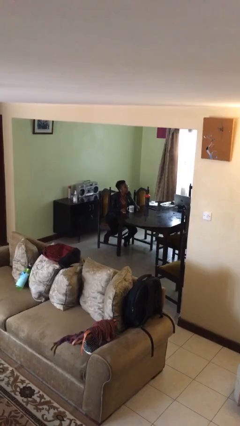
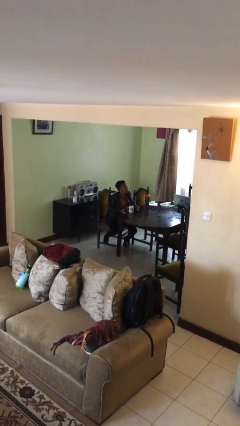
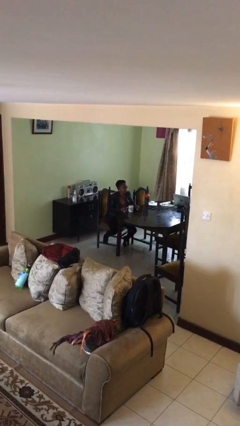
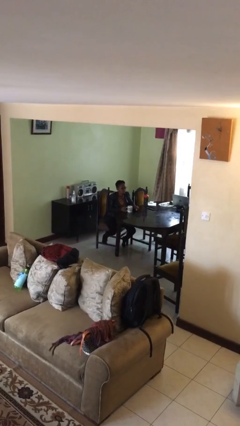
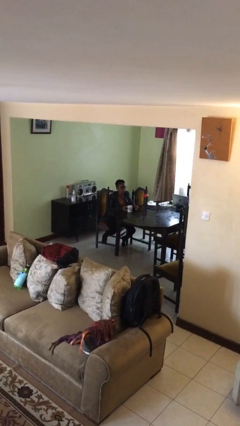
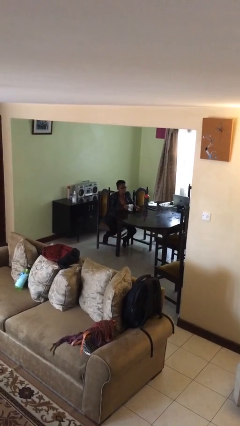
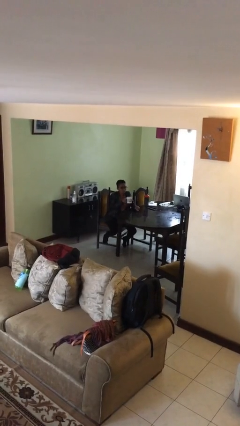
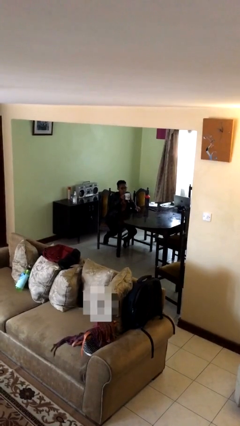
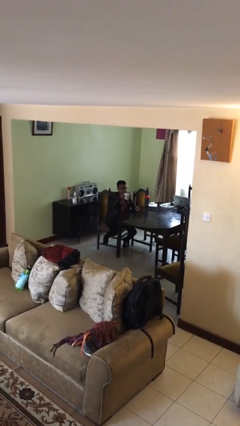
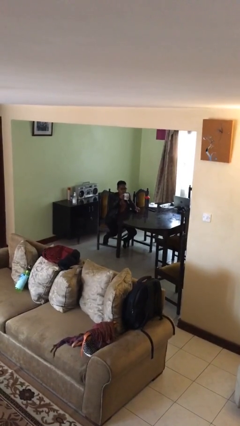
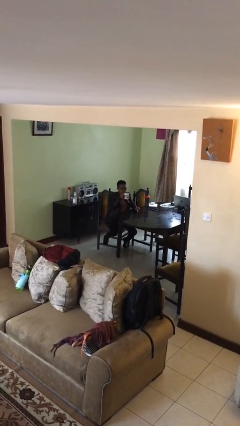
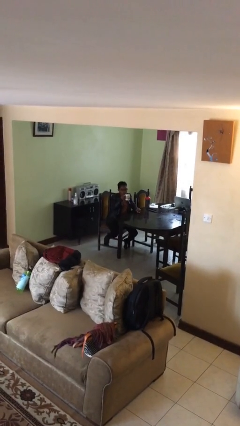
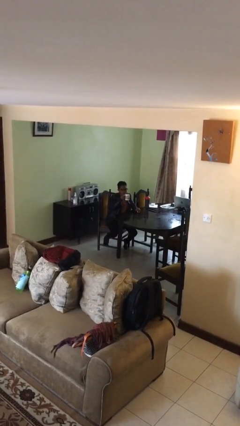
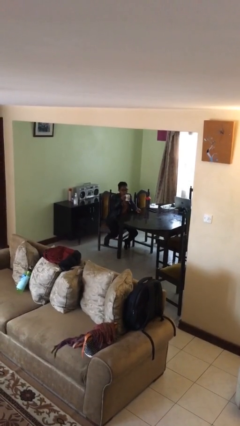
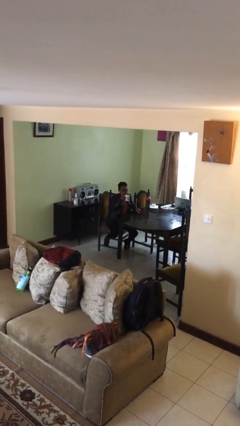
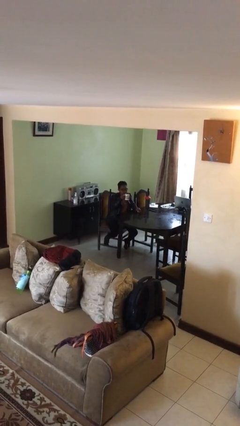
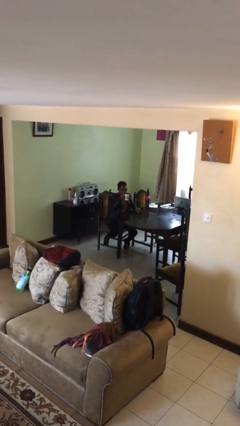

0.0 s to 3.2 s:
person picks up object from table

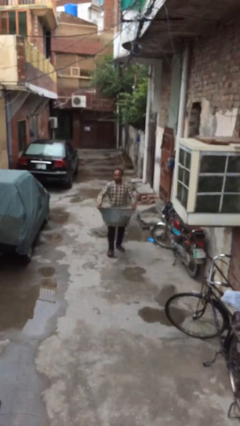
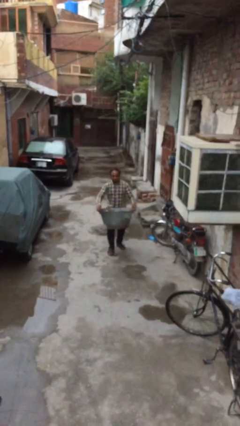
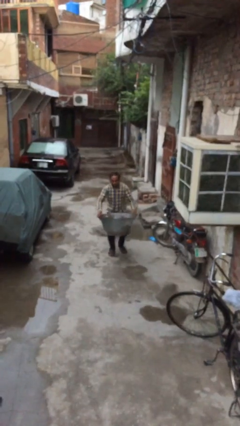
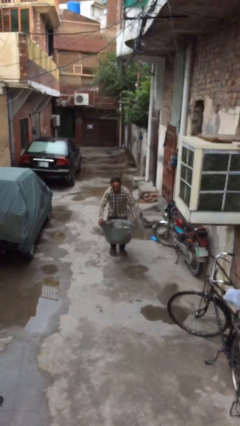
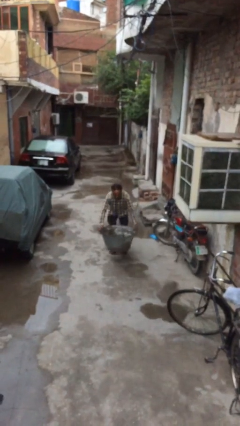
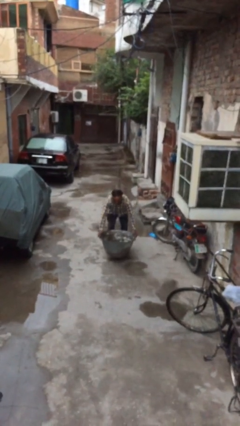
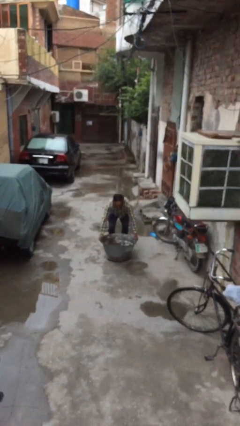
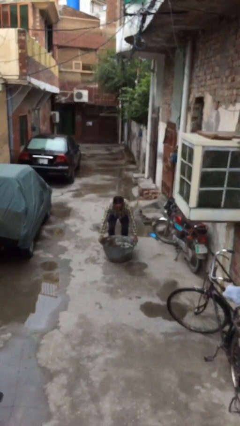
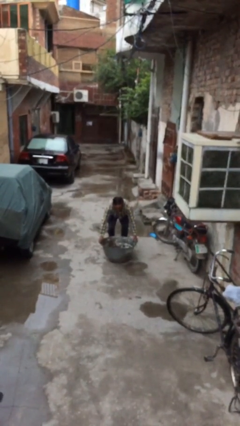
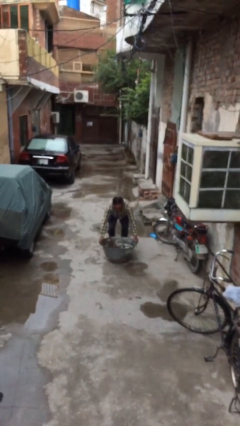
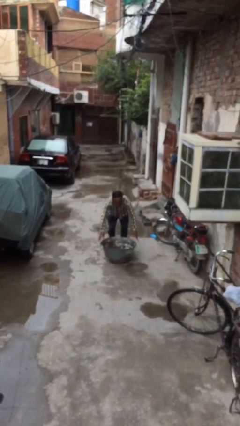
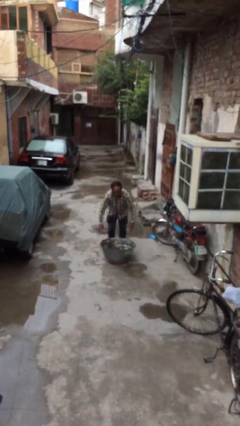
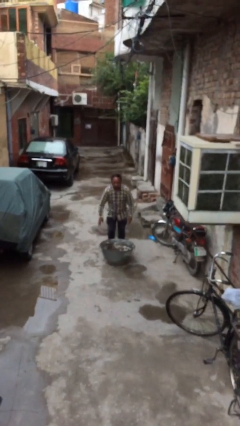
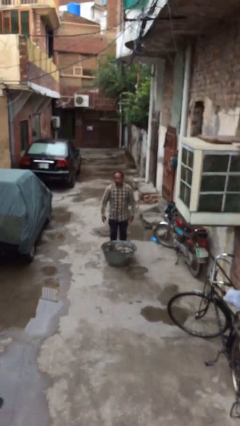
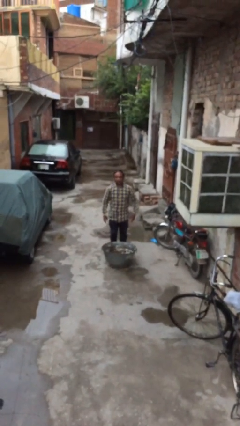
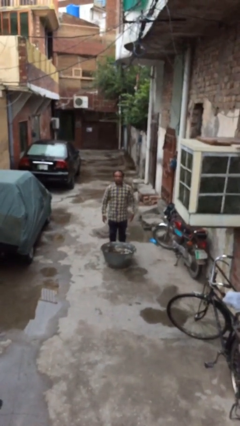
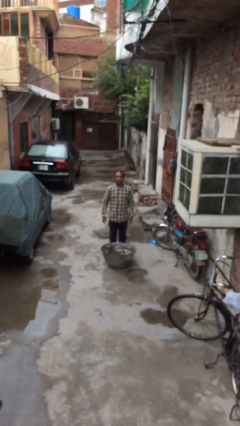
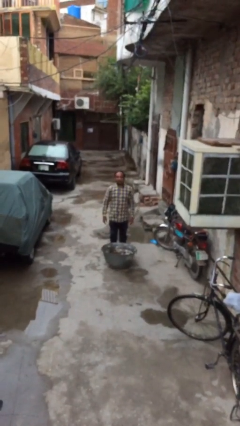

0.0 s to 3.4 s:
person puts down object on floor

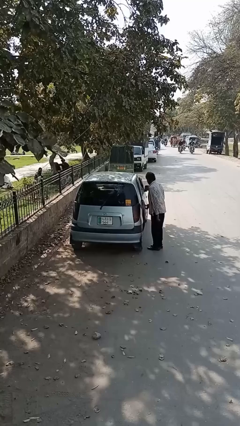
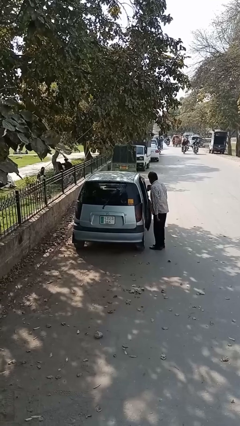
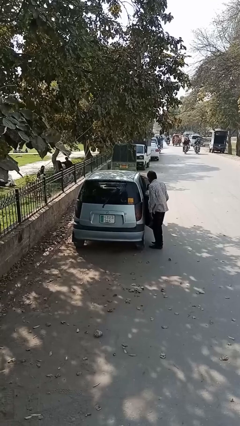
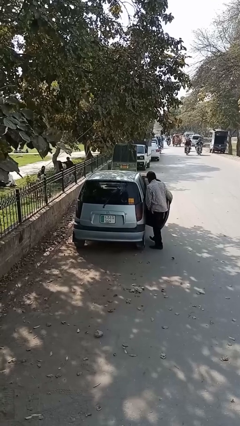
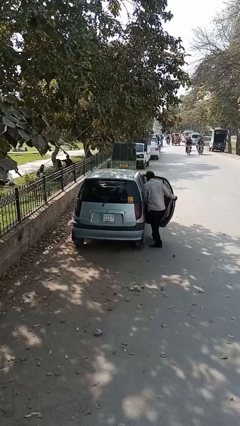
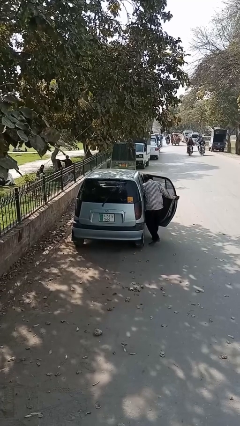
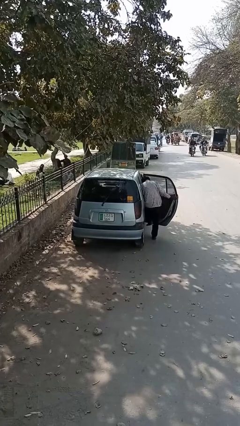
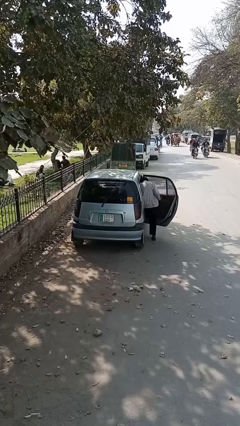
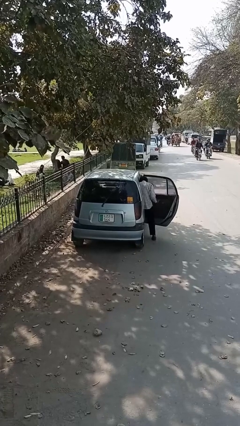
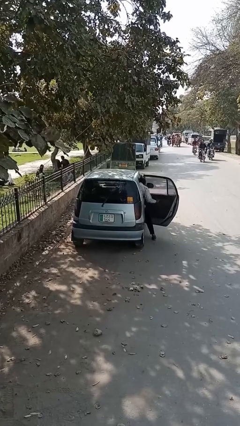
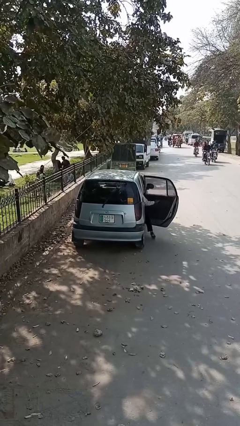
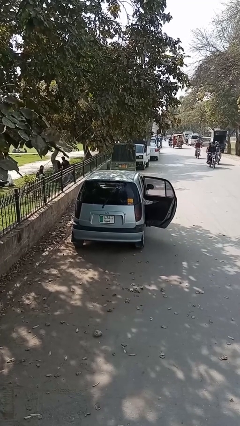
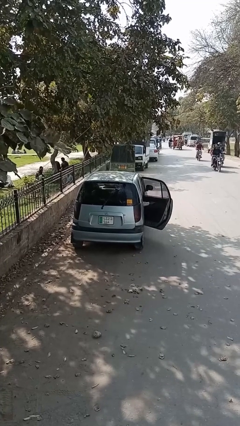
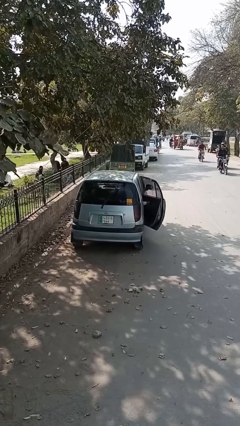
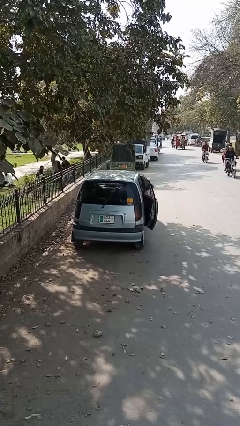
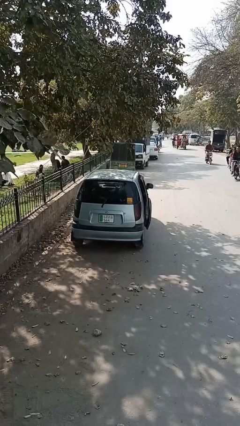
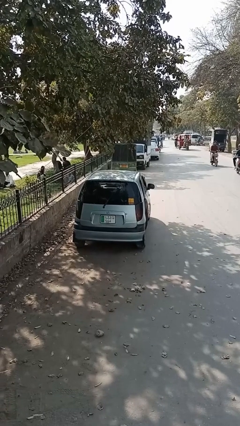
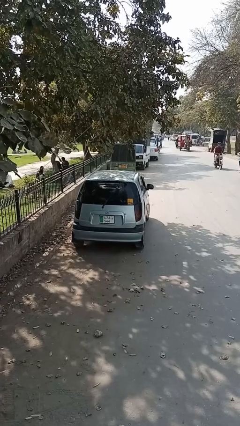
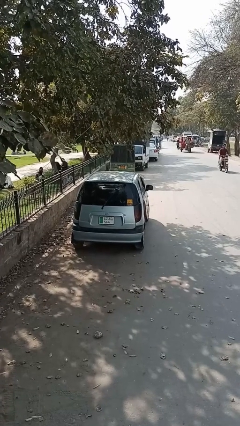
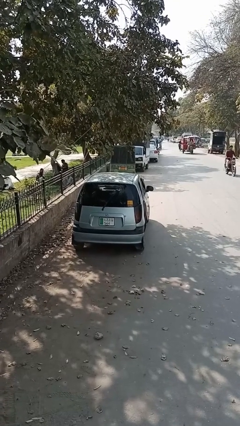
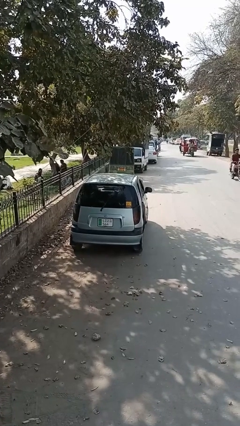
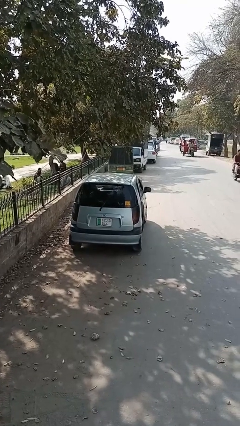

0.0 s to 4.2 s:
car picks up person

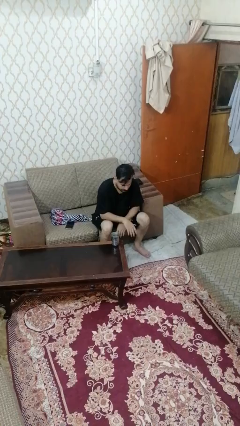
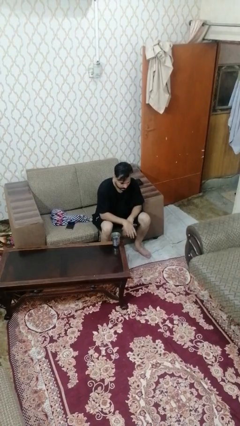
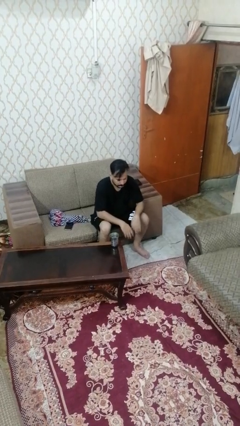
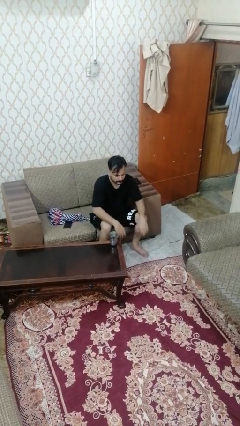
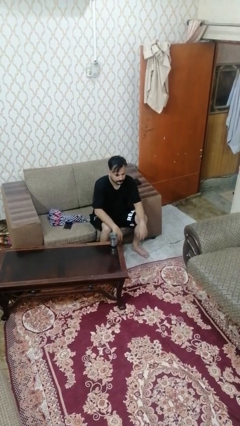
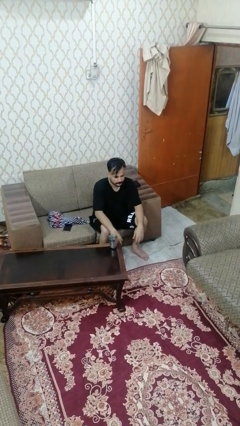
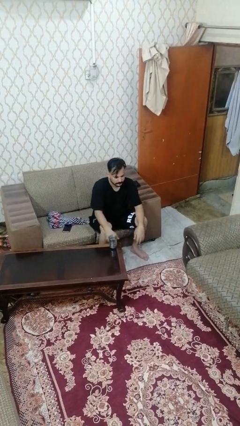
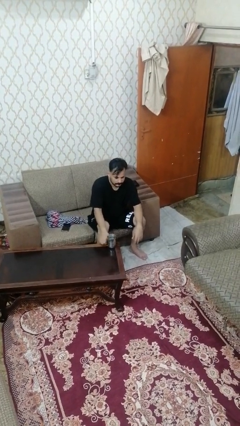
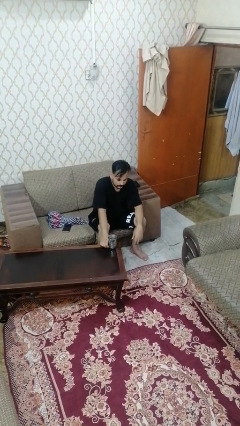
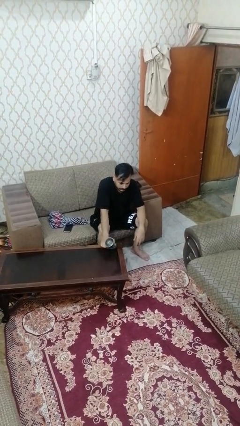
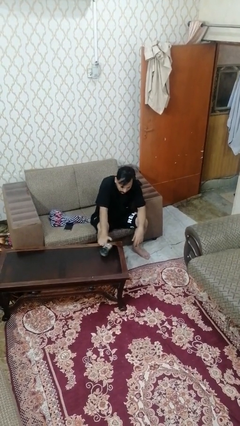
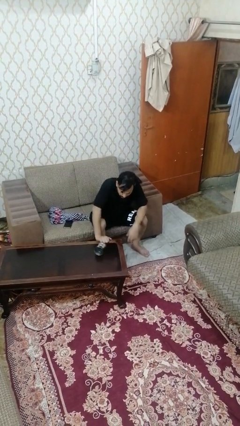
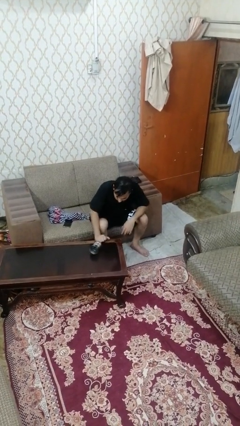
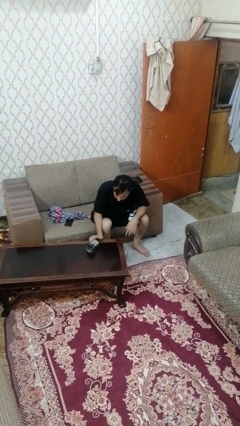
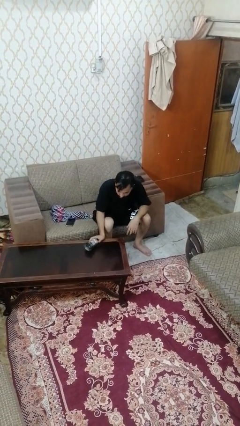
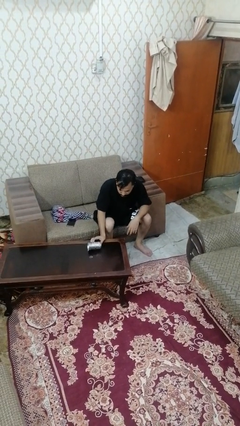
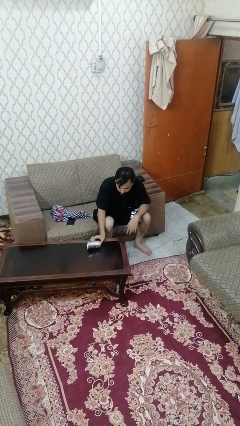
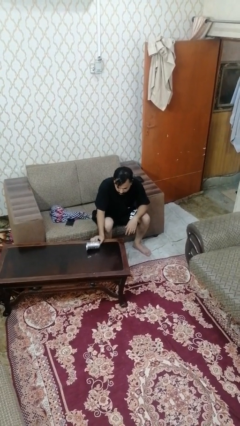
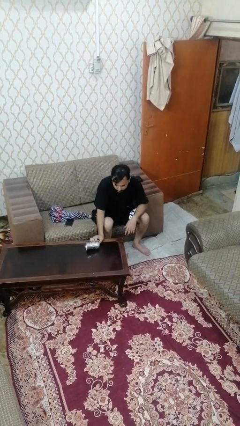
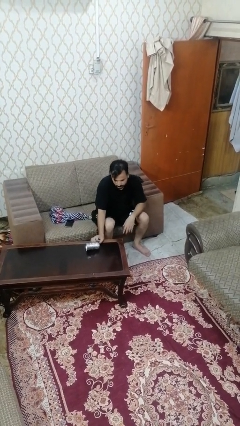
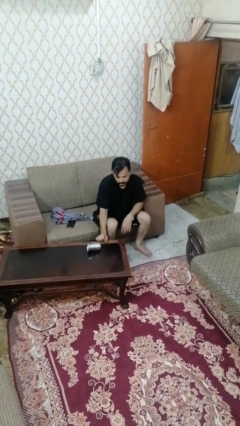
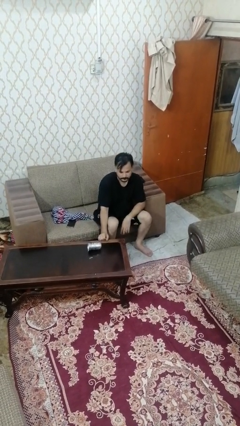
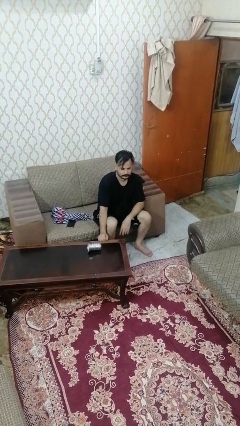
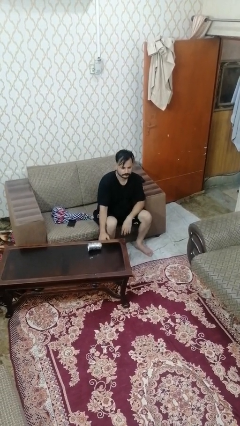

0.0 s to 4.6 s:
person knocks over glass

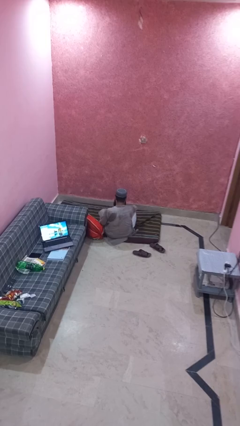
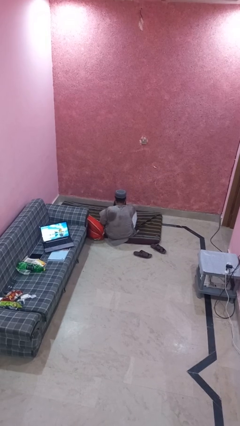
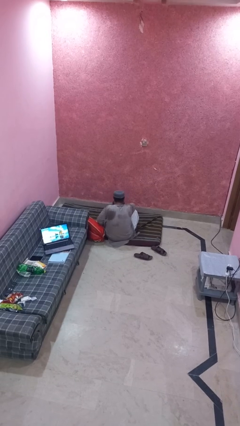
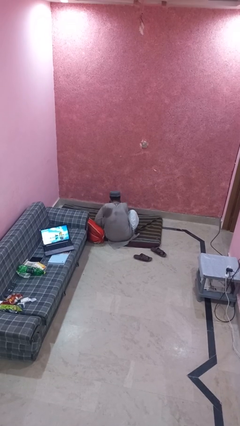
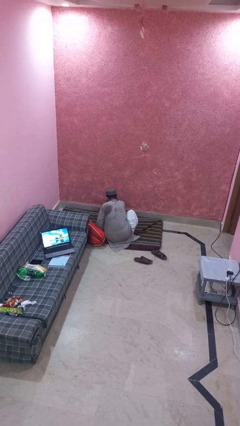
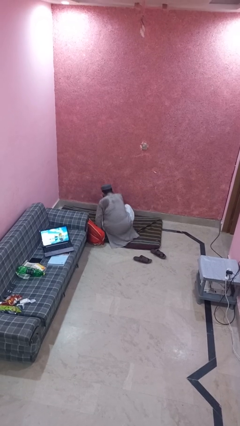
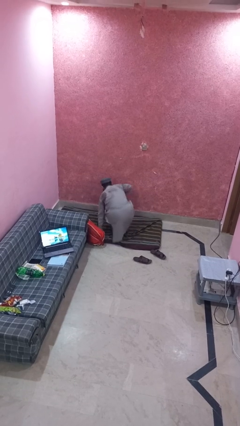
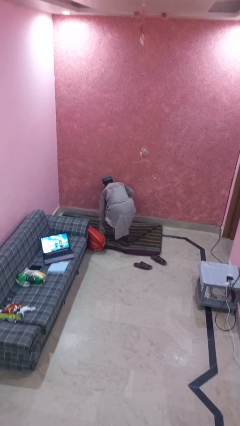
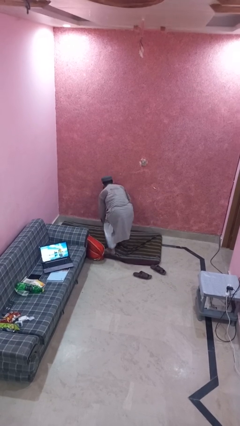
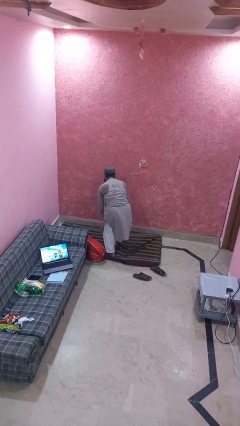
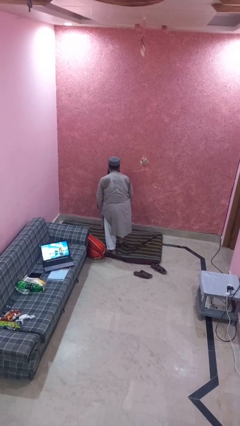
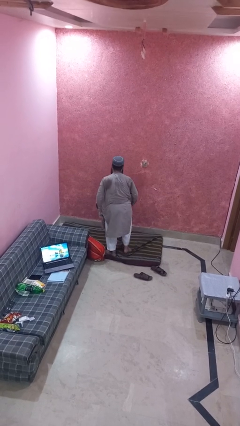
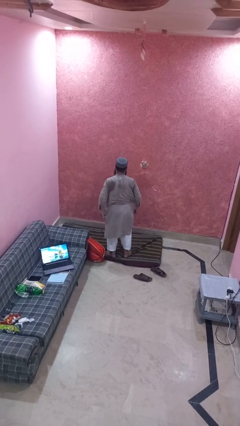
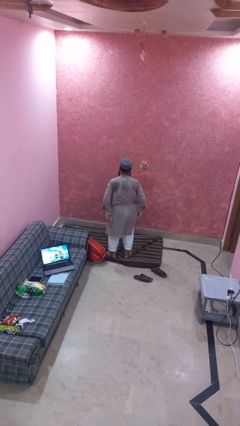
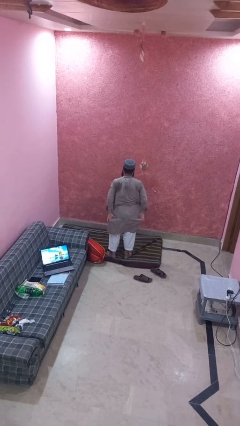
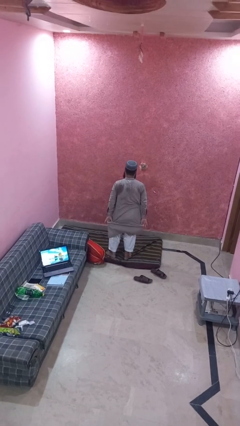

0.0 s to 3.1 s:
person stands up from floor
